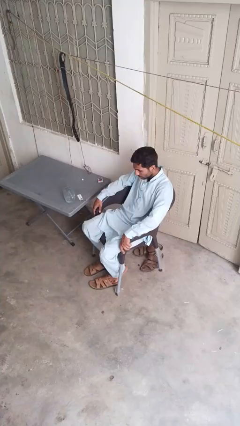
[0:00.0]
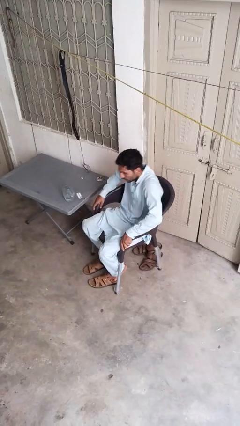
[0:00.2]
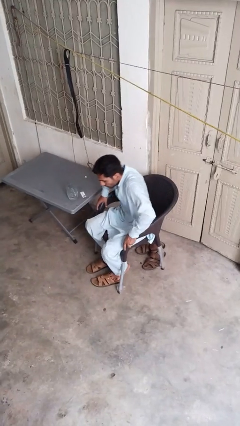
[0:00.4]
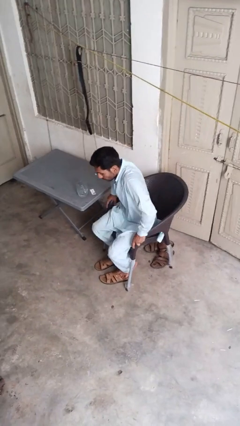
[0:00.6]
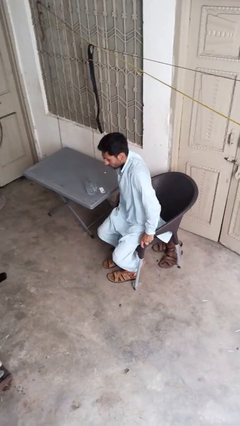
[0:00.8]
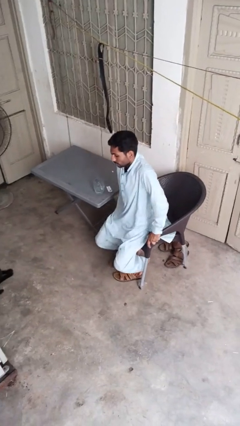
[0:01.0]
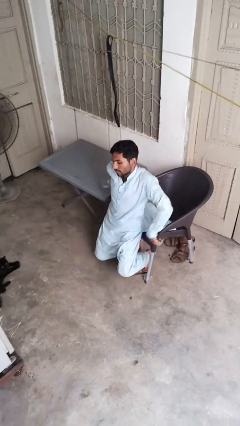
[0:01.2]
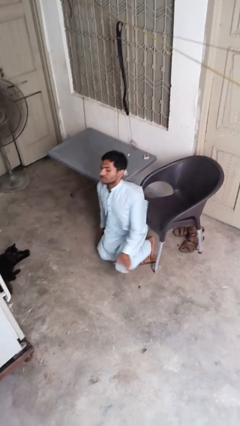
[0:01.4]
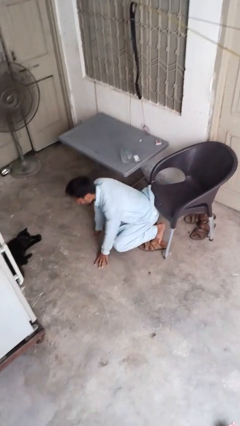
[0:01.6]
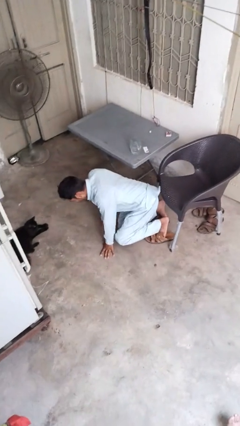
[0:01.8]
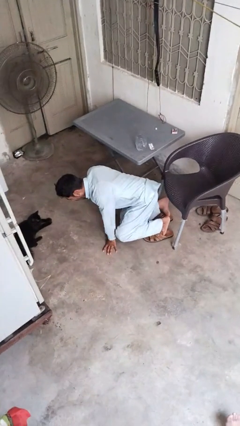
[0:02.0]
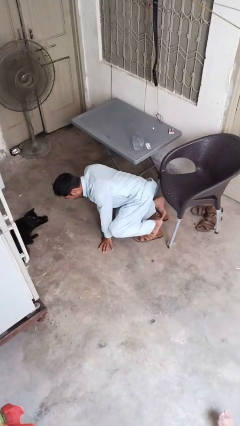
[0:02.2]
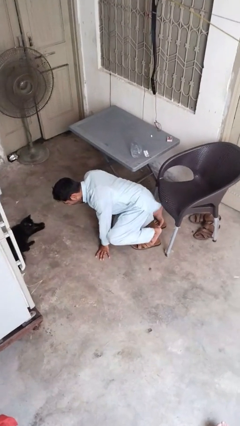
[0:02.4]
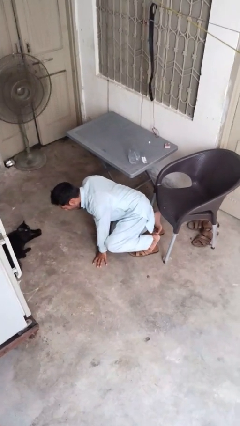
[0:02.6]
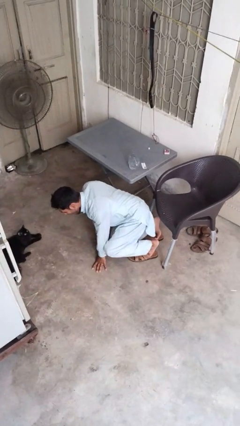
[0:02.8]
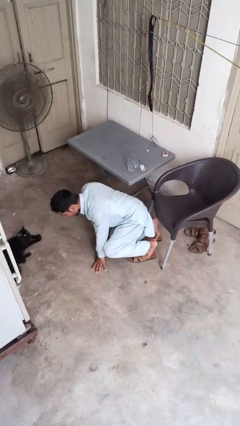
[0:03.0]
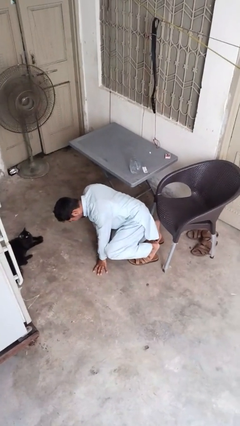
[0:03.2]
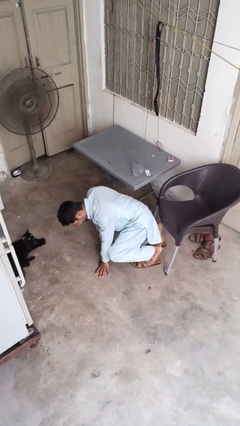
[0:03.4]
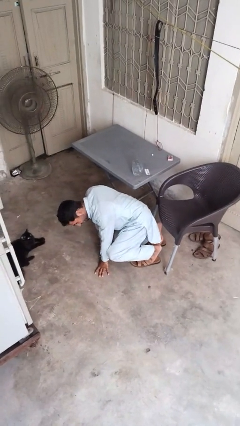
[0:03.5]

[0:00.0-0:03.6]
person falls from chair

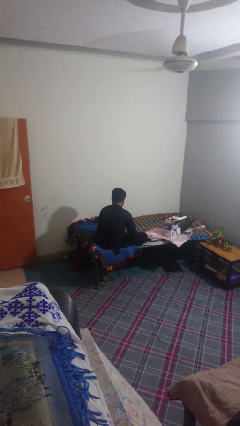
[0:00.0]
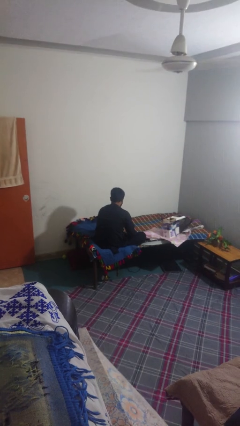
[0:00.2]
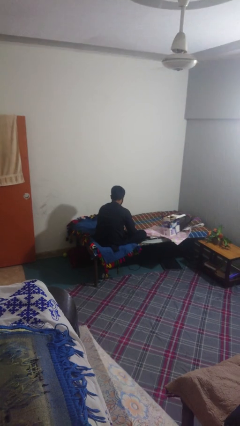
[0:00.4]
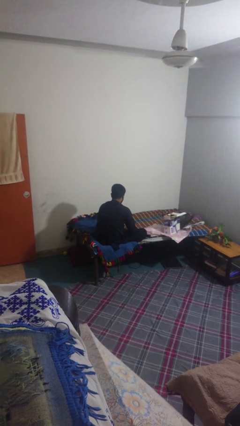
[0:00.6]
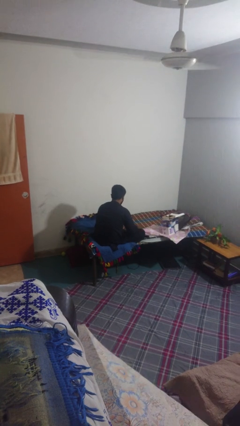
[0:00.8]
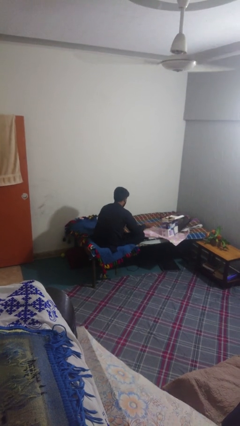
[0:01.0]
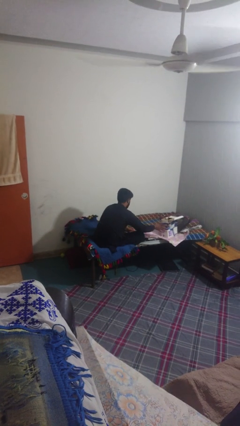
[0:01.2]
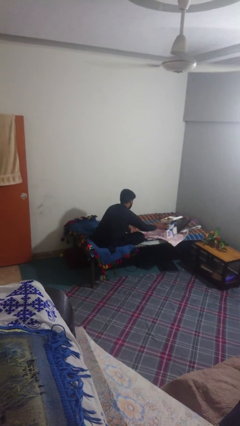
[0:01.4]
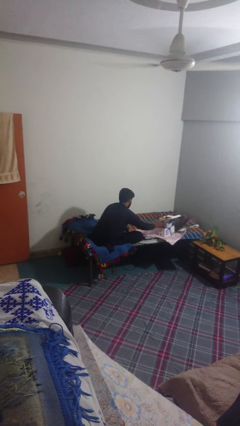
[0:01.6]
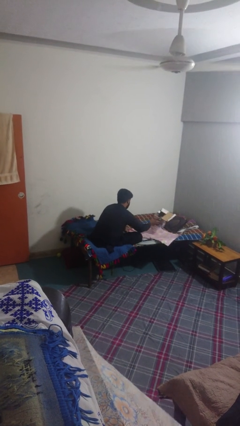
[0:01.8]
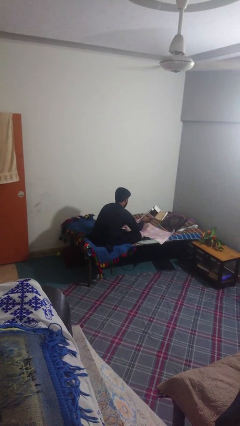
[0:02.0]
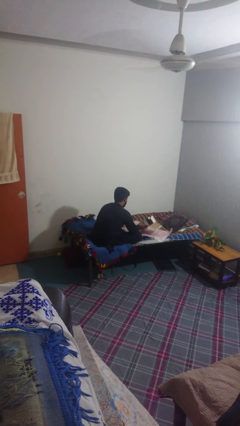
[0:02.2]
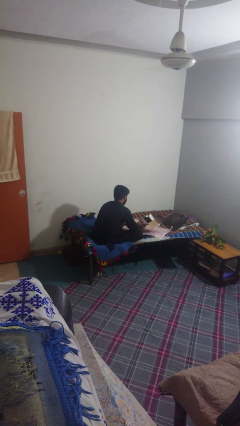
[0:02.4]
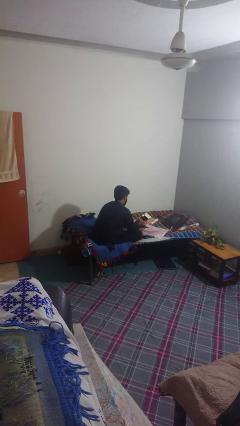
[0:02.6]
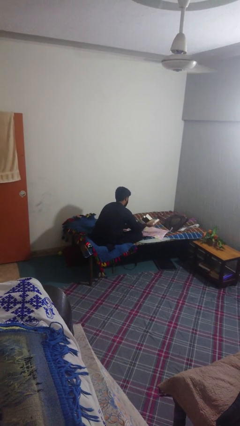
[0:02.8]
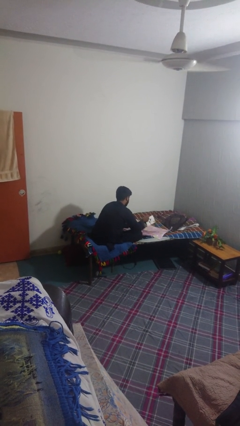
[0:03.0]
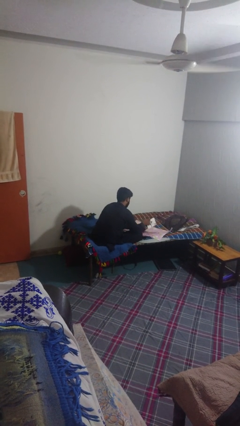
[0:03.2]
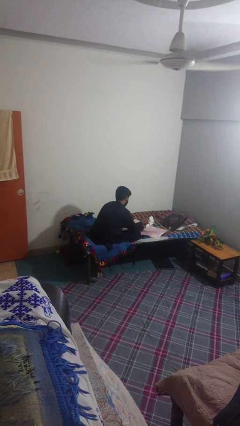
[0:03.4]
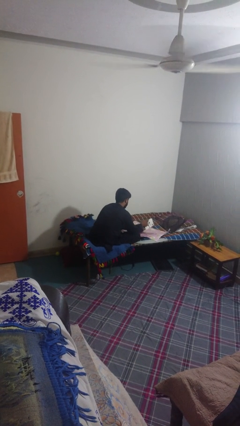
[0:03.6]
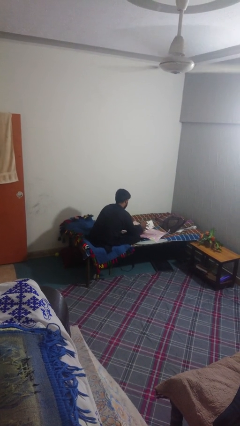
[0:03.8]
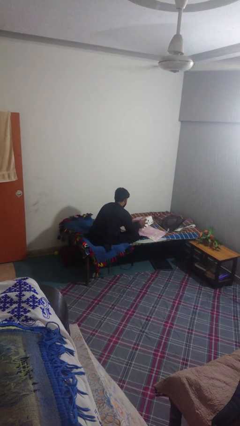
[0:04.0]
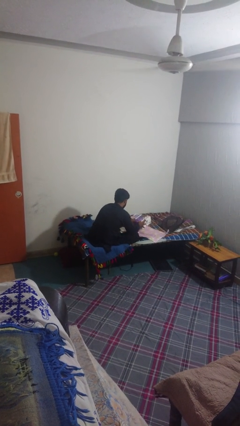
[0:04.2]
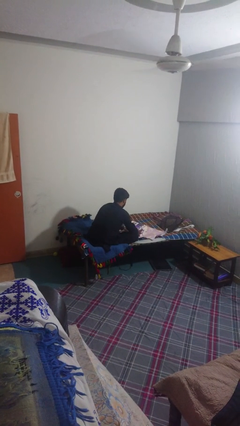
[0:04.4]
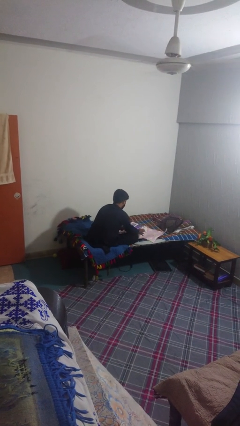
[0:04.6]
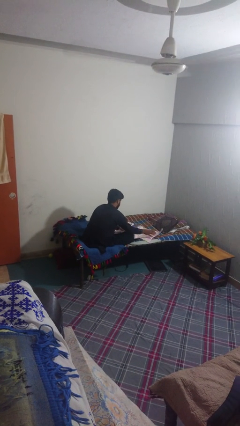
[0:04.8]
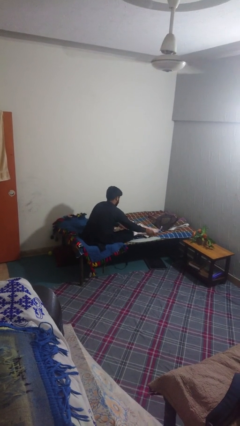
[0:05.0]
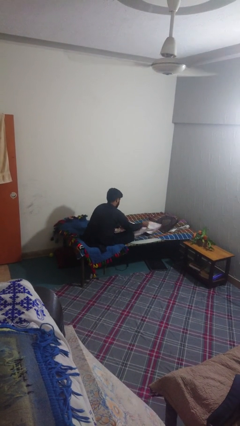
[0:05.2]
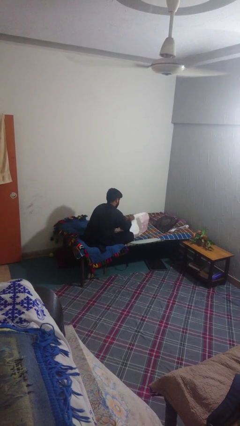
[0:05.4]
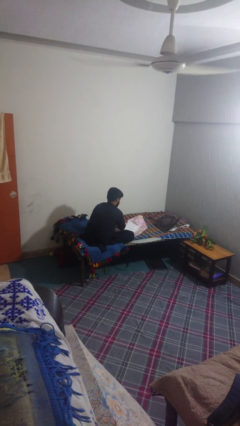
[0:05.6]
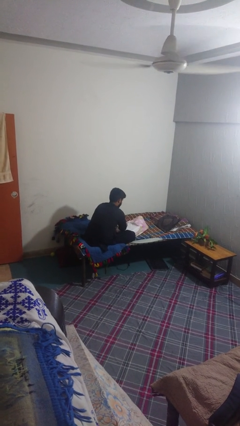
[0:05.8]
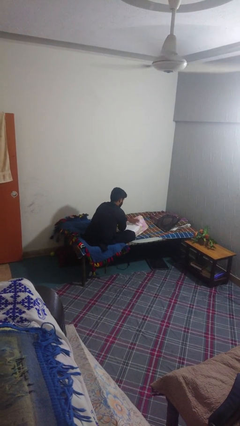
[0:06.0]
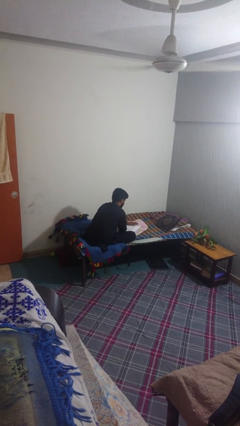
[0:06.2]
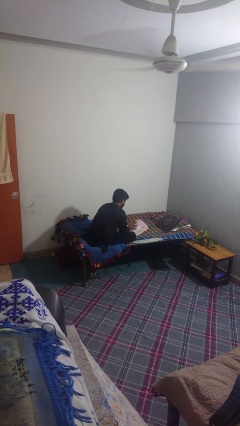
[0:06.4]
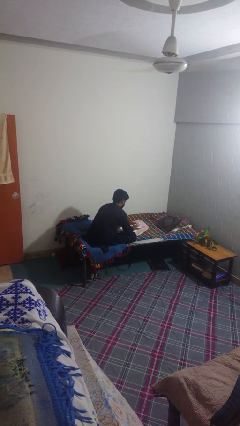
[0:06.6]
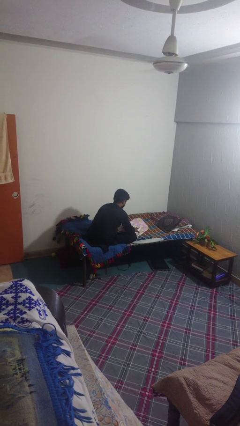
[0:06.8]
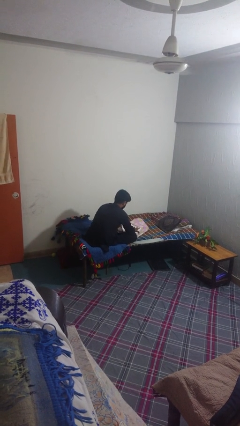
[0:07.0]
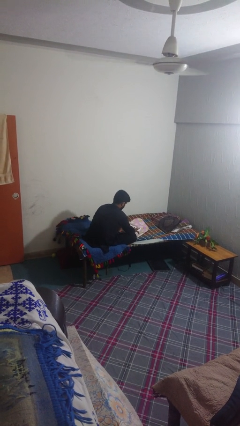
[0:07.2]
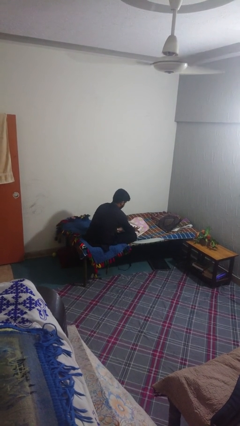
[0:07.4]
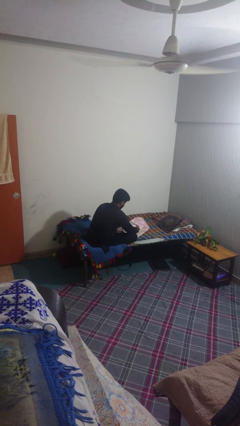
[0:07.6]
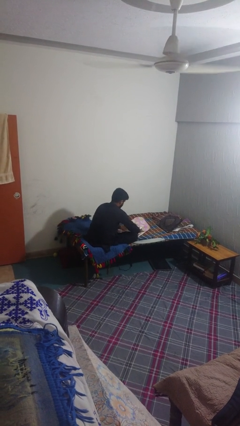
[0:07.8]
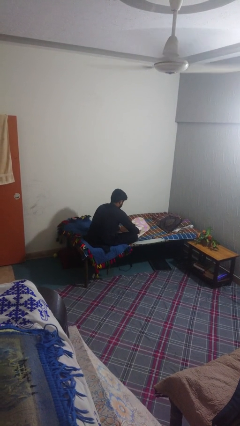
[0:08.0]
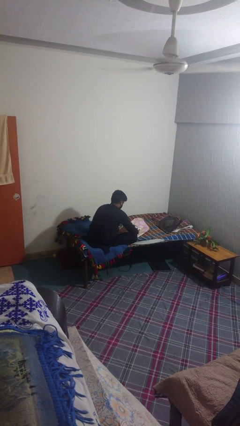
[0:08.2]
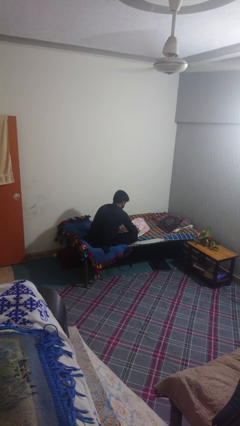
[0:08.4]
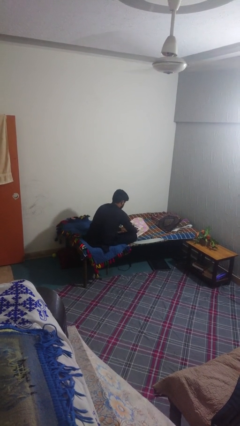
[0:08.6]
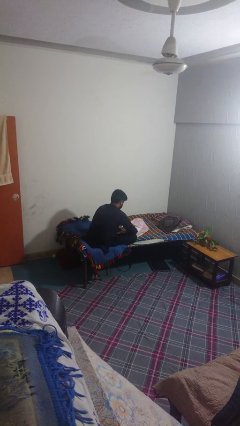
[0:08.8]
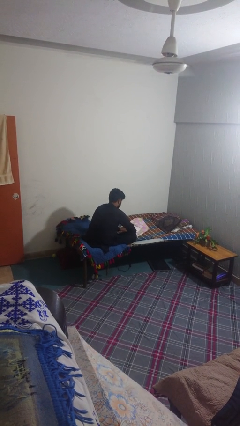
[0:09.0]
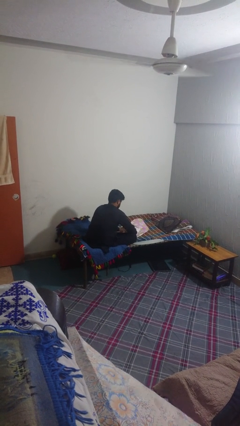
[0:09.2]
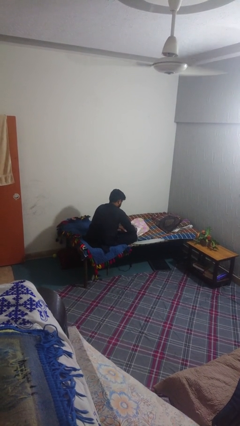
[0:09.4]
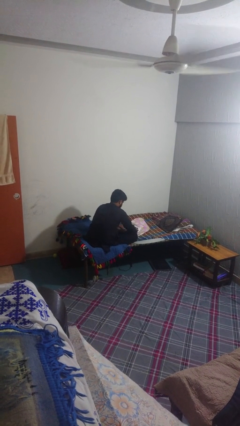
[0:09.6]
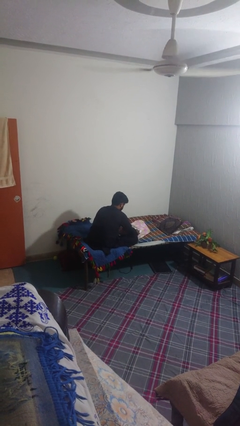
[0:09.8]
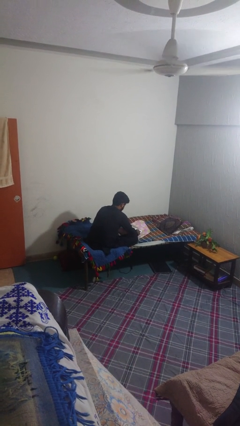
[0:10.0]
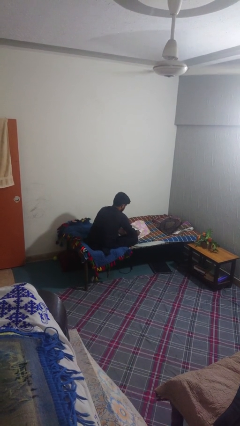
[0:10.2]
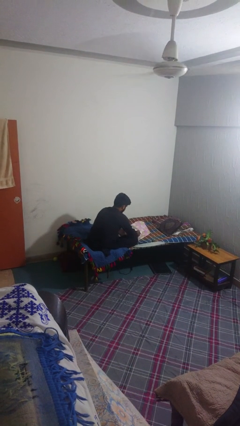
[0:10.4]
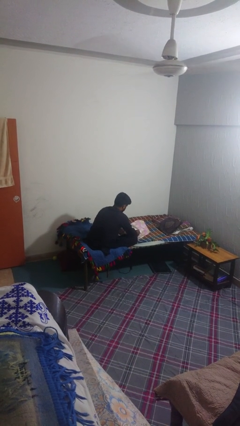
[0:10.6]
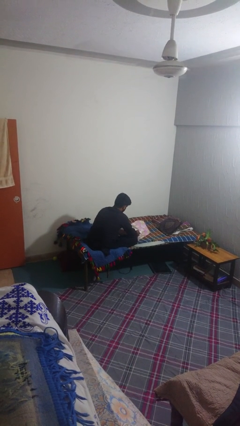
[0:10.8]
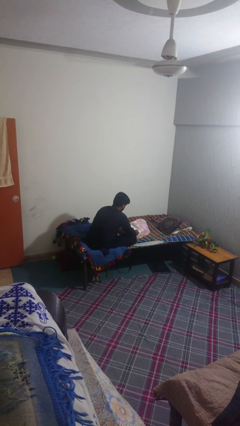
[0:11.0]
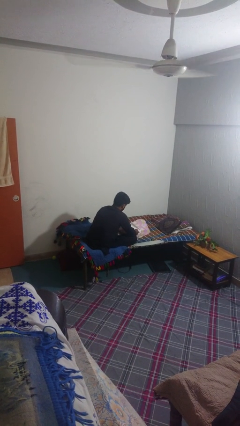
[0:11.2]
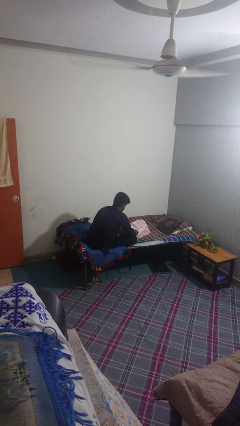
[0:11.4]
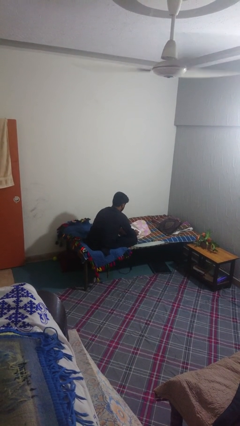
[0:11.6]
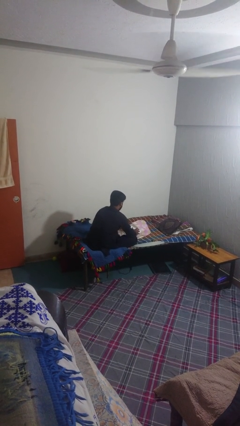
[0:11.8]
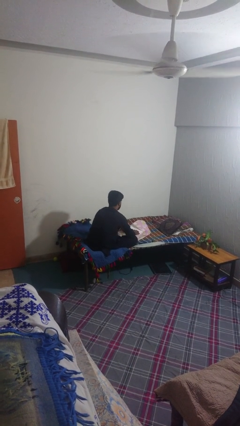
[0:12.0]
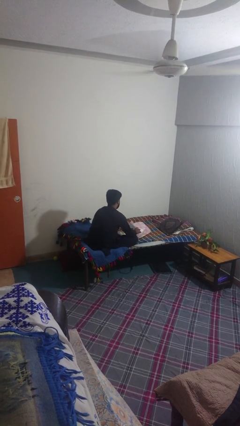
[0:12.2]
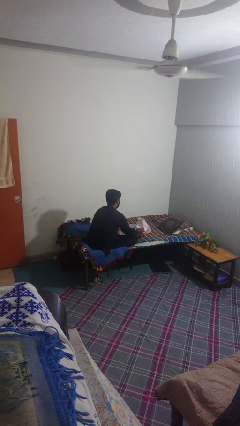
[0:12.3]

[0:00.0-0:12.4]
person wraps box

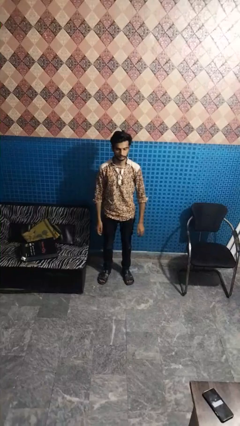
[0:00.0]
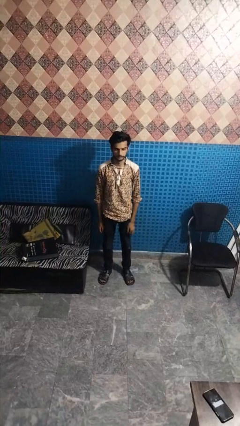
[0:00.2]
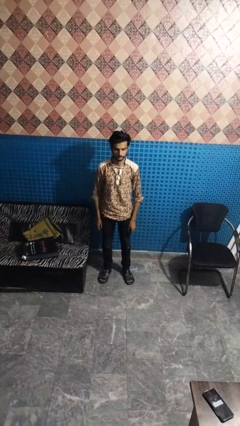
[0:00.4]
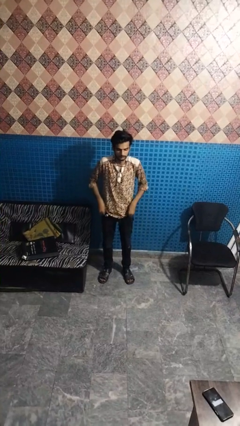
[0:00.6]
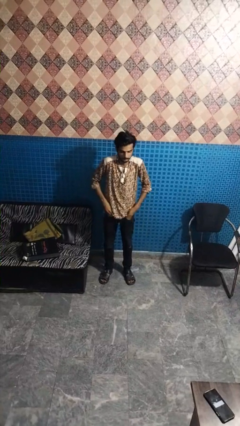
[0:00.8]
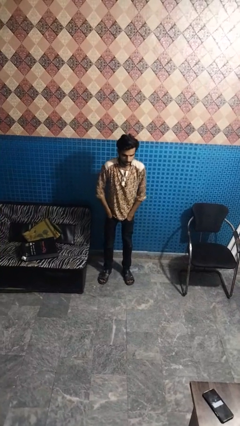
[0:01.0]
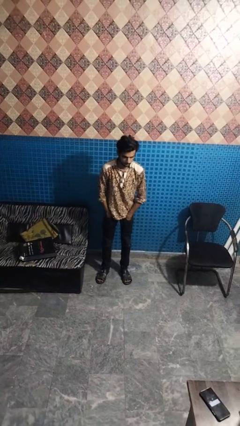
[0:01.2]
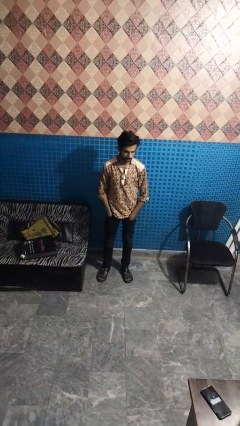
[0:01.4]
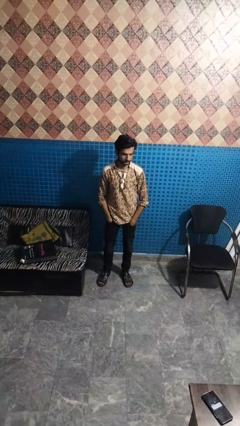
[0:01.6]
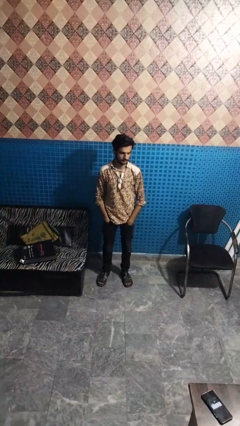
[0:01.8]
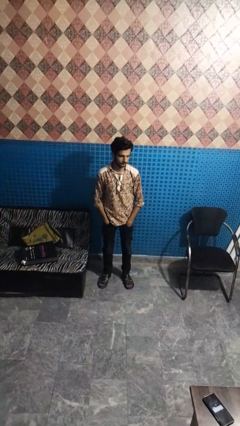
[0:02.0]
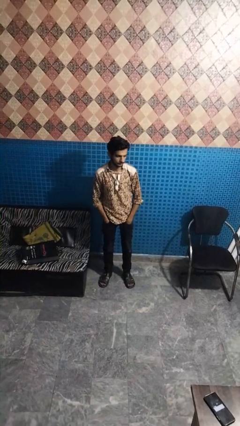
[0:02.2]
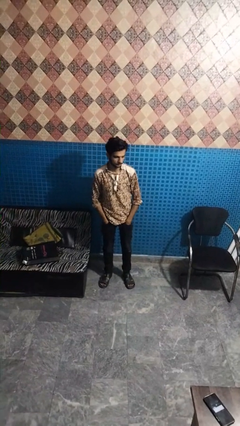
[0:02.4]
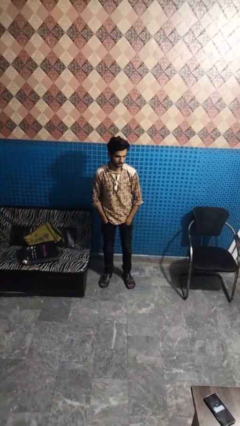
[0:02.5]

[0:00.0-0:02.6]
person puts hands in back pockets
